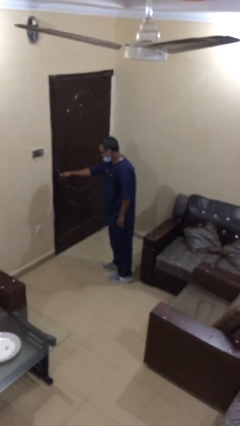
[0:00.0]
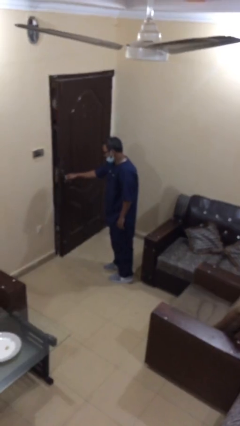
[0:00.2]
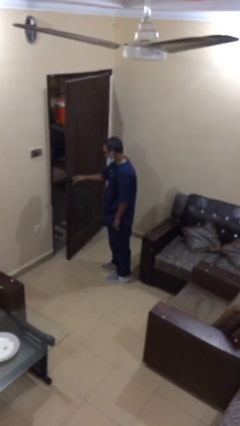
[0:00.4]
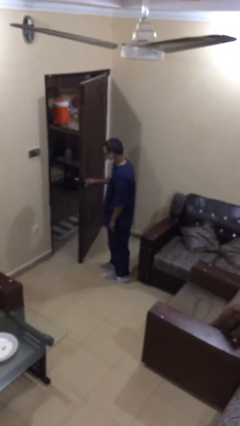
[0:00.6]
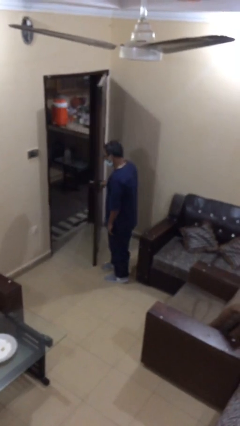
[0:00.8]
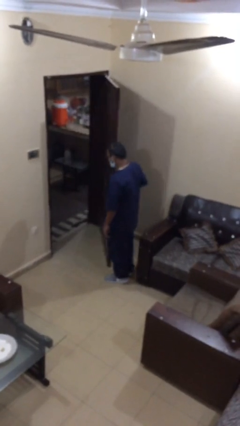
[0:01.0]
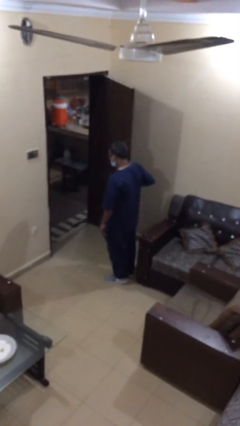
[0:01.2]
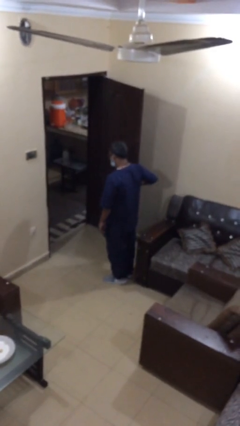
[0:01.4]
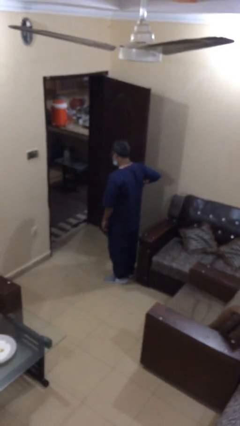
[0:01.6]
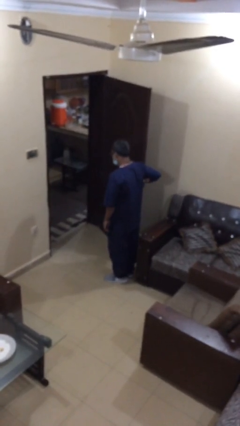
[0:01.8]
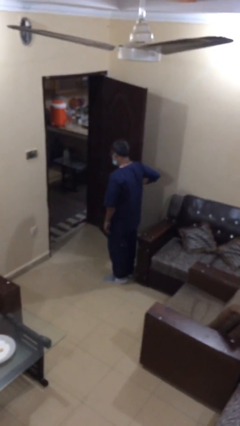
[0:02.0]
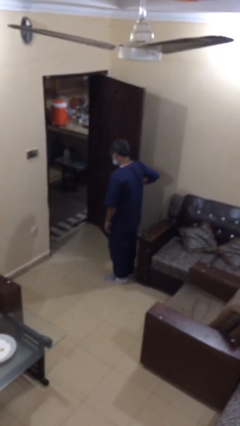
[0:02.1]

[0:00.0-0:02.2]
person opens facility door

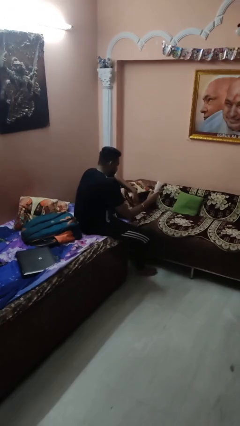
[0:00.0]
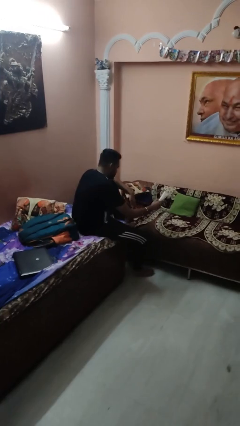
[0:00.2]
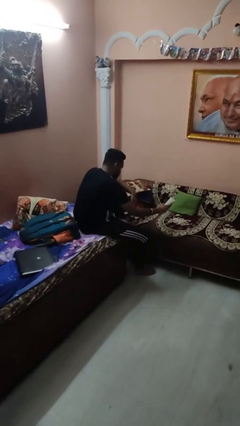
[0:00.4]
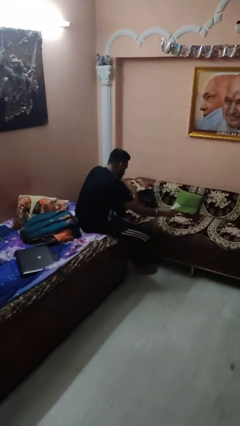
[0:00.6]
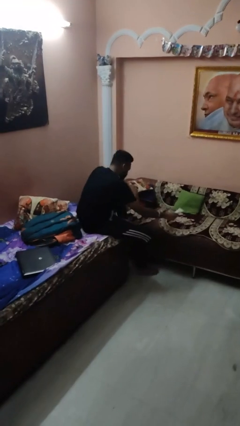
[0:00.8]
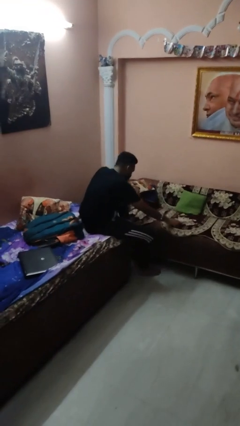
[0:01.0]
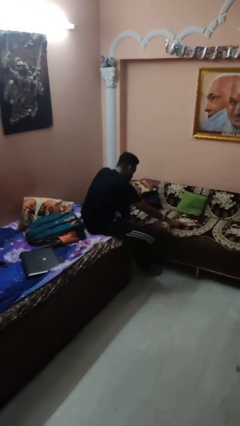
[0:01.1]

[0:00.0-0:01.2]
person puts down object on couch

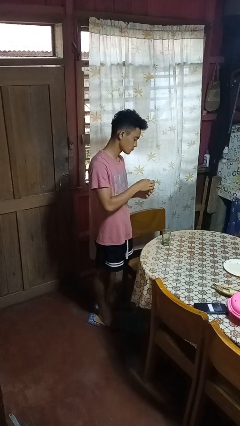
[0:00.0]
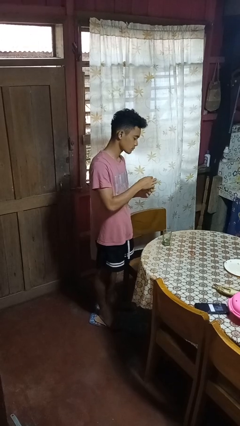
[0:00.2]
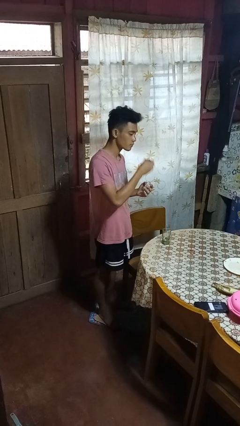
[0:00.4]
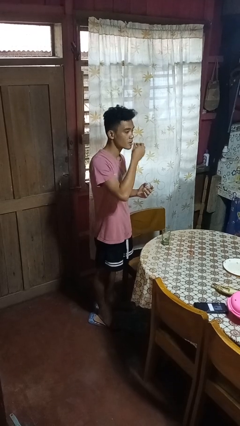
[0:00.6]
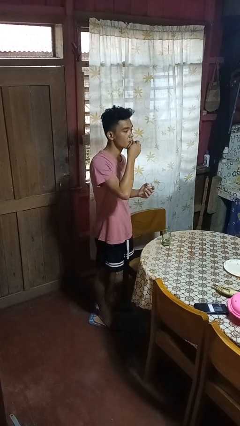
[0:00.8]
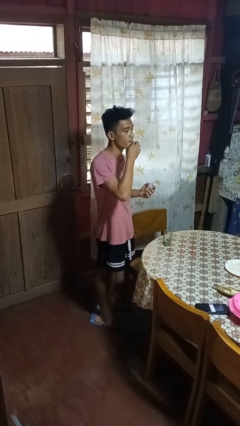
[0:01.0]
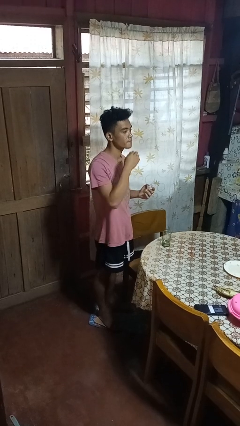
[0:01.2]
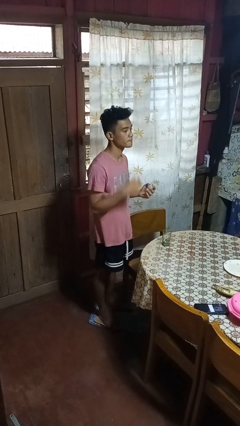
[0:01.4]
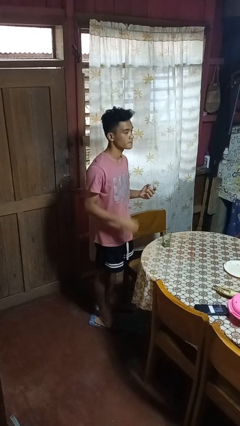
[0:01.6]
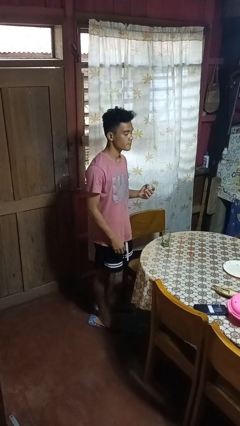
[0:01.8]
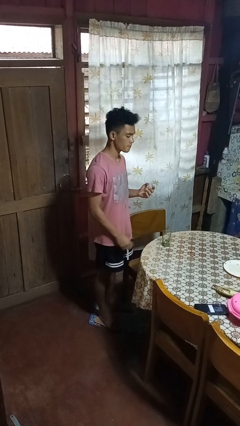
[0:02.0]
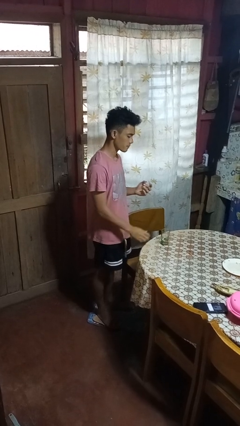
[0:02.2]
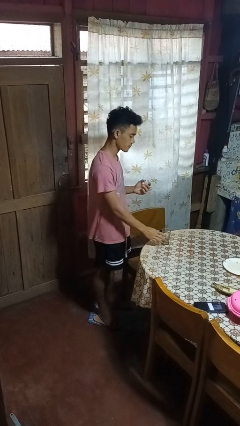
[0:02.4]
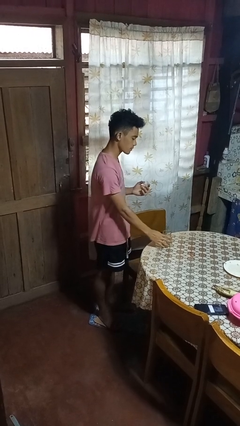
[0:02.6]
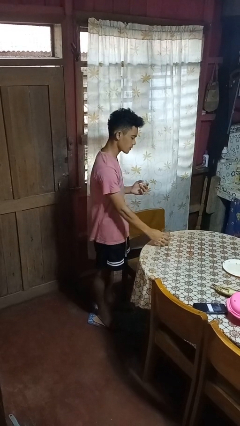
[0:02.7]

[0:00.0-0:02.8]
person takes medicine pills

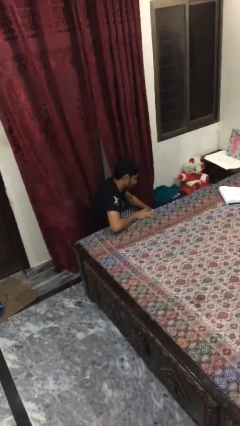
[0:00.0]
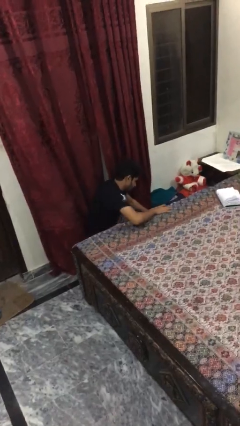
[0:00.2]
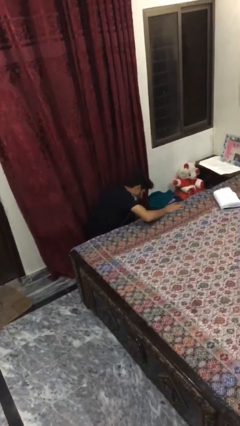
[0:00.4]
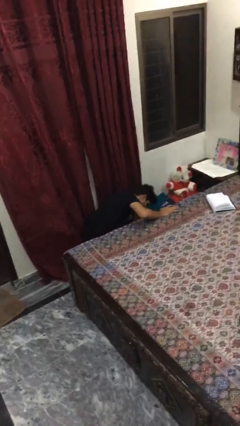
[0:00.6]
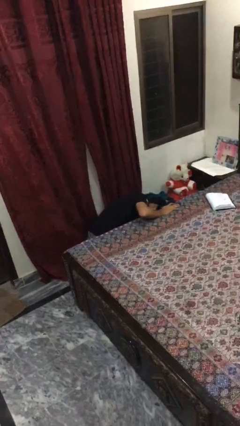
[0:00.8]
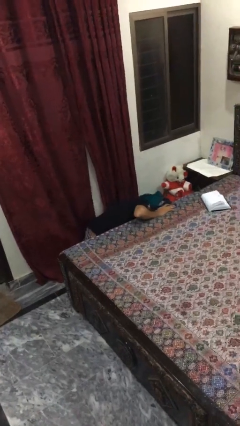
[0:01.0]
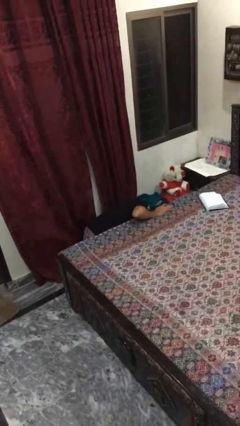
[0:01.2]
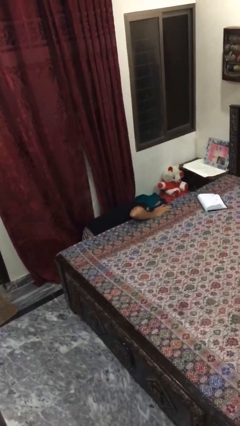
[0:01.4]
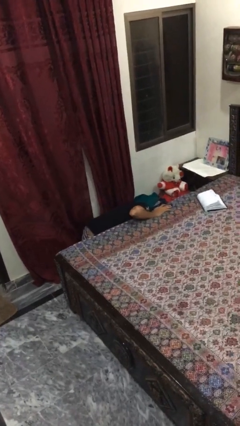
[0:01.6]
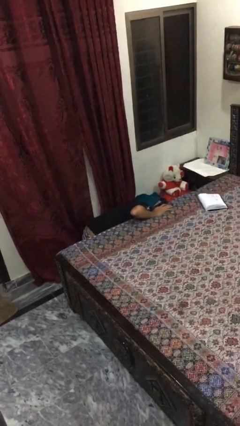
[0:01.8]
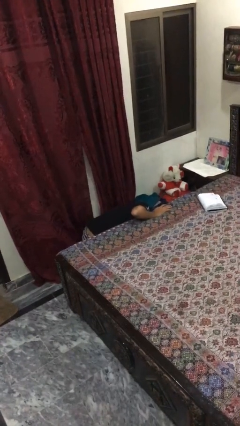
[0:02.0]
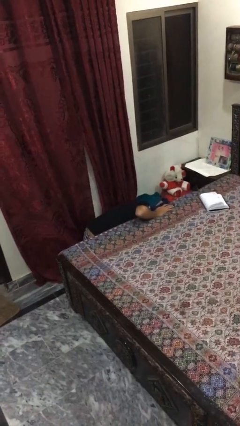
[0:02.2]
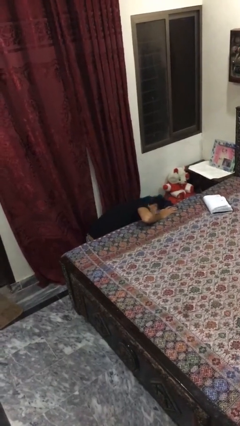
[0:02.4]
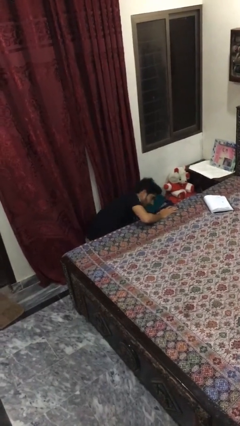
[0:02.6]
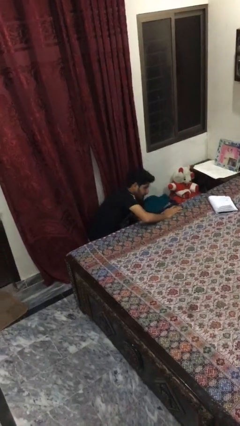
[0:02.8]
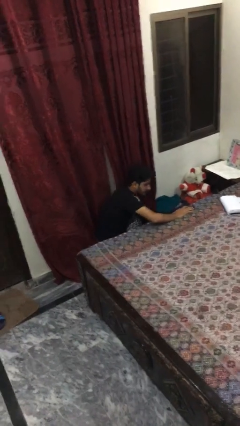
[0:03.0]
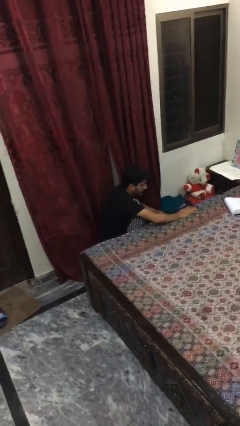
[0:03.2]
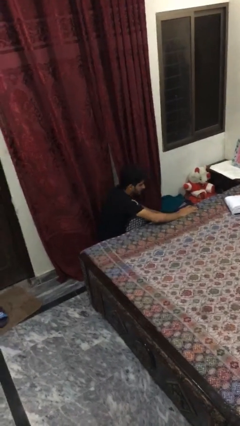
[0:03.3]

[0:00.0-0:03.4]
person searches under bed

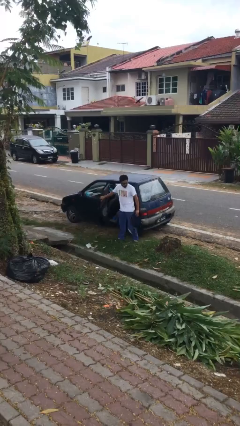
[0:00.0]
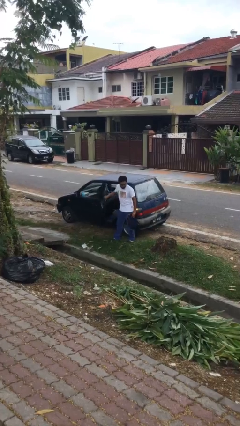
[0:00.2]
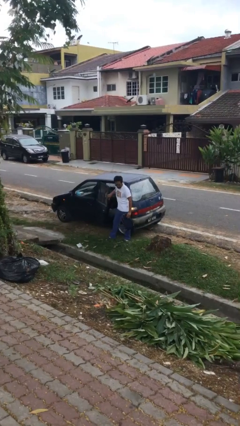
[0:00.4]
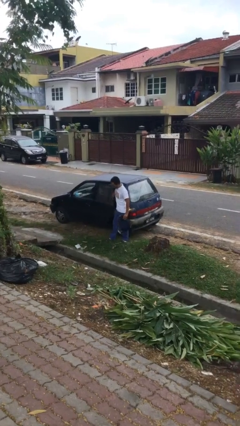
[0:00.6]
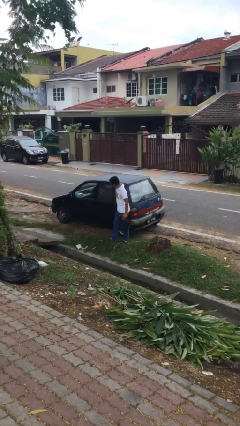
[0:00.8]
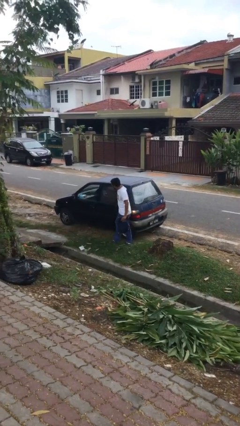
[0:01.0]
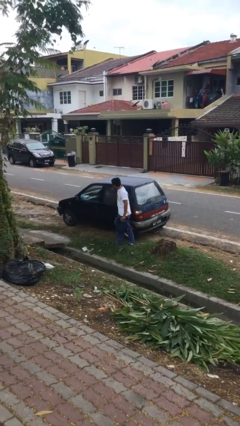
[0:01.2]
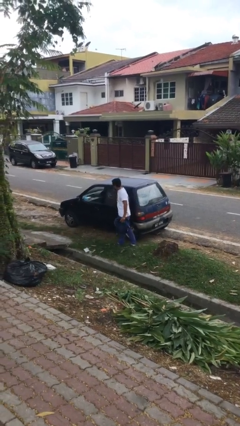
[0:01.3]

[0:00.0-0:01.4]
person closes car door

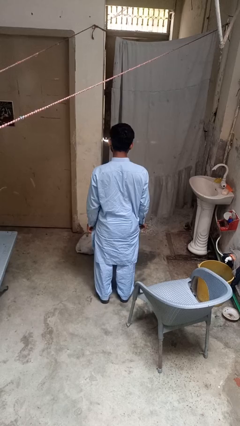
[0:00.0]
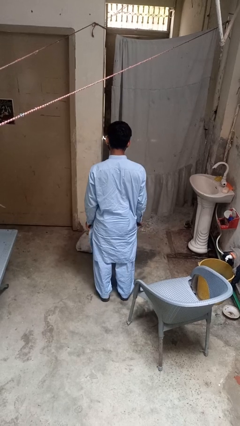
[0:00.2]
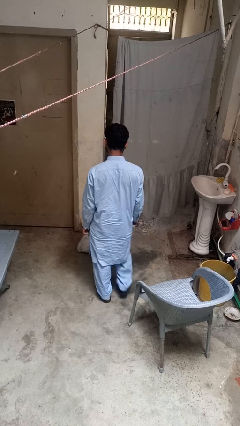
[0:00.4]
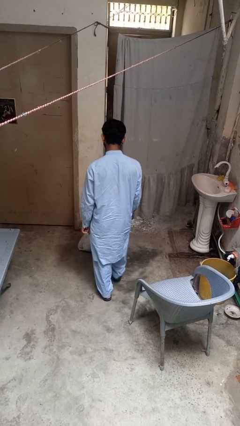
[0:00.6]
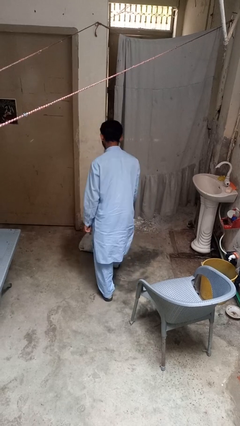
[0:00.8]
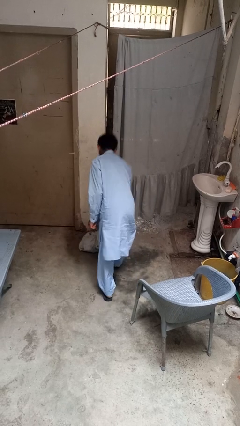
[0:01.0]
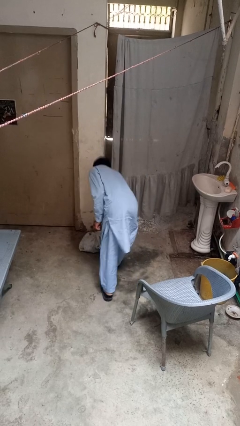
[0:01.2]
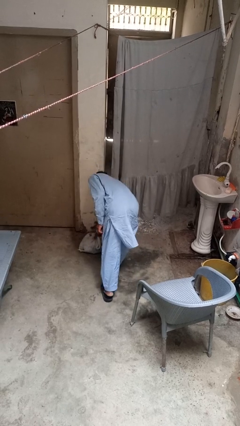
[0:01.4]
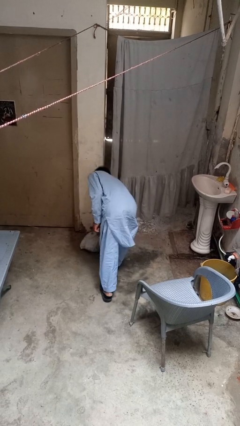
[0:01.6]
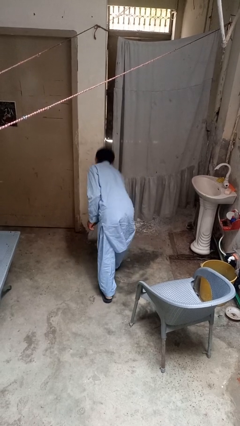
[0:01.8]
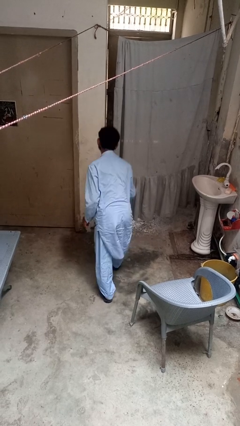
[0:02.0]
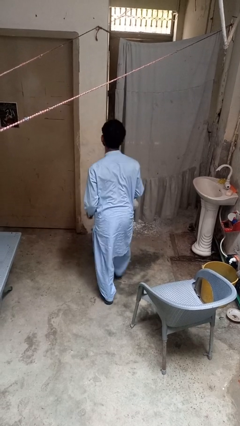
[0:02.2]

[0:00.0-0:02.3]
person picks up object from floor

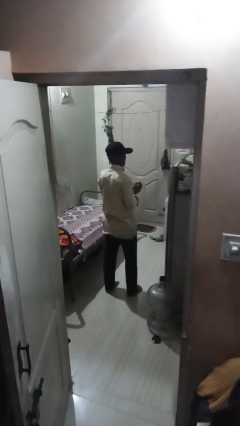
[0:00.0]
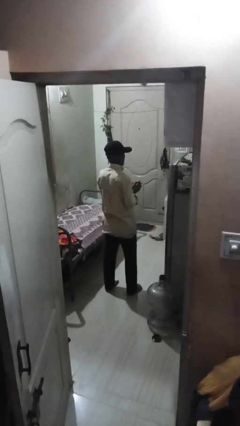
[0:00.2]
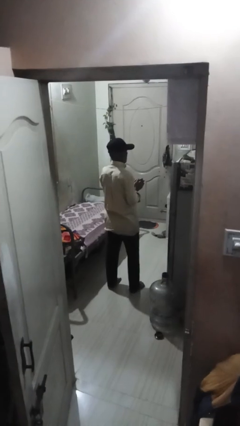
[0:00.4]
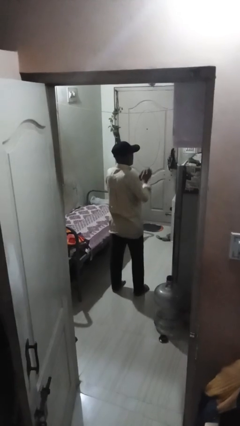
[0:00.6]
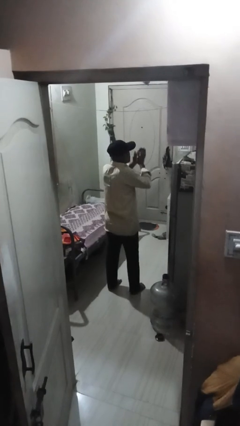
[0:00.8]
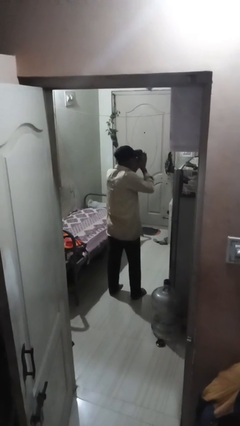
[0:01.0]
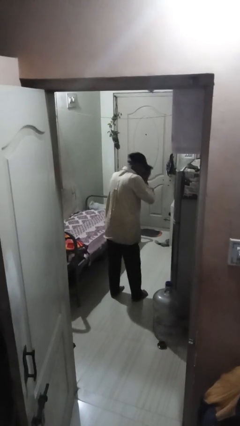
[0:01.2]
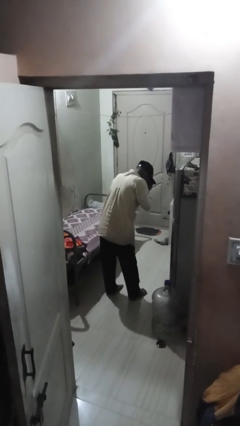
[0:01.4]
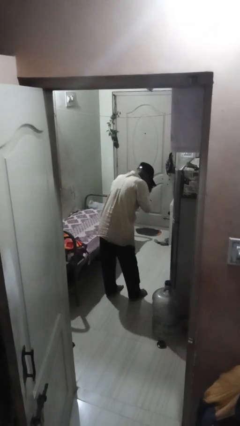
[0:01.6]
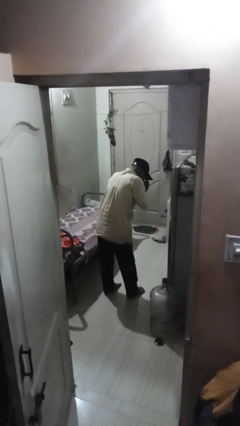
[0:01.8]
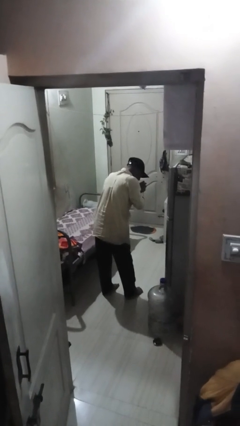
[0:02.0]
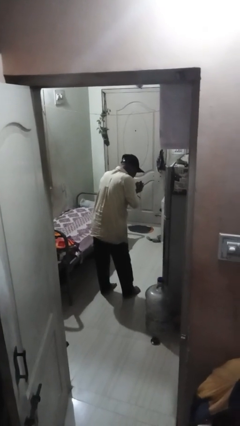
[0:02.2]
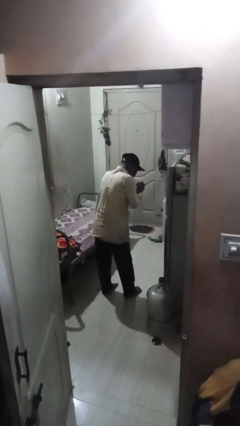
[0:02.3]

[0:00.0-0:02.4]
person sneezes into hand

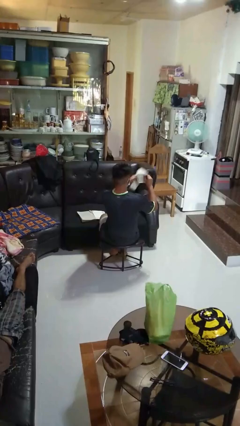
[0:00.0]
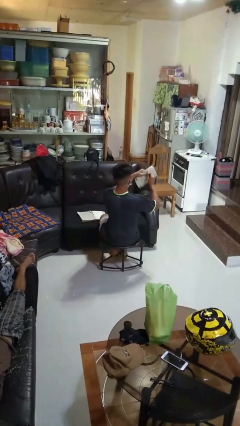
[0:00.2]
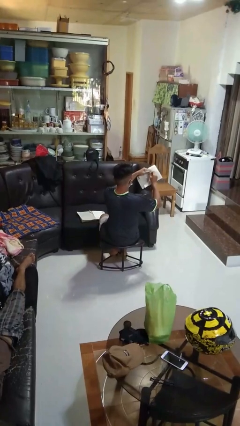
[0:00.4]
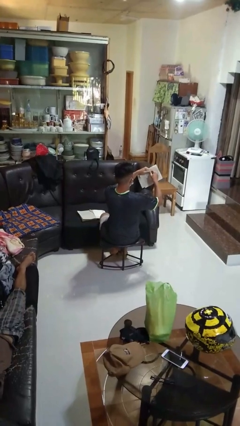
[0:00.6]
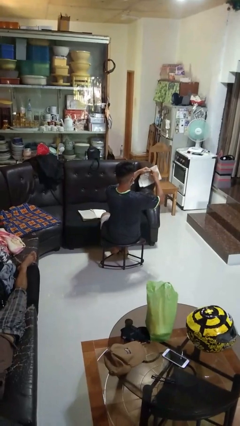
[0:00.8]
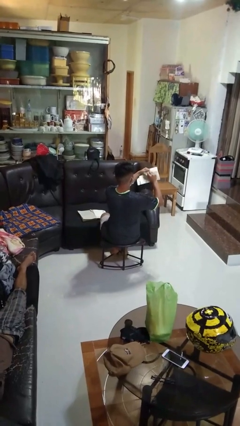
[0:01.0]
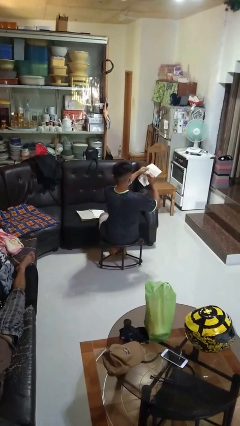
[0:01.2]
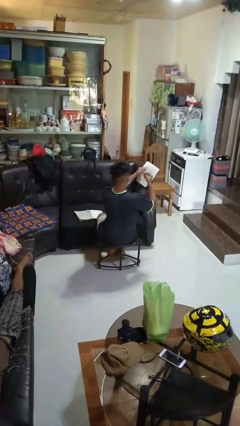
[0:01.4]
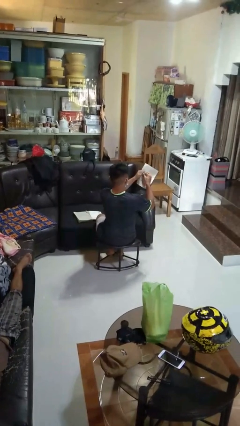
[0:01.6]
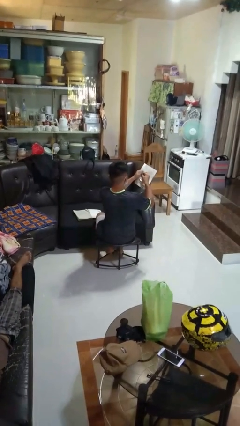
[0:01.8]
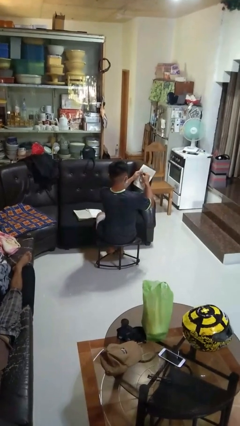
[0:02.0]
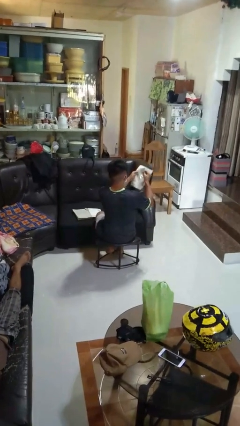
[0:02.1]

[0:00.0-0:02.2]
person tears paper
